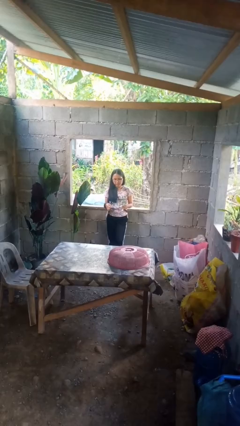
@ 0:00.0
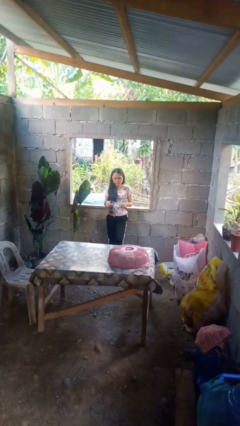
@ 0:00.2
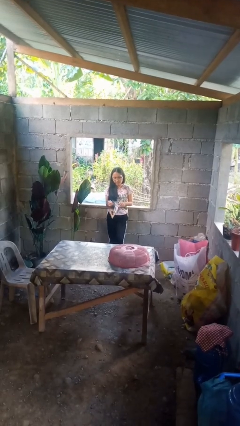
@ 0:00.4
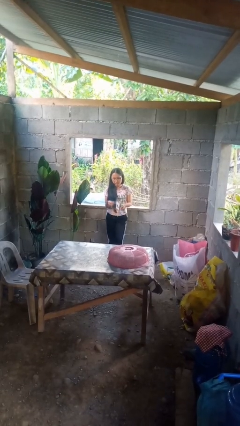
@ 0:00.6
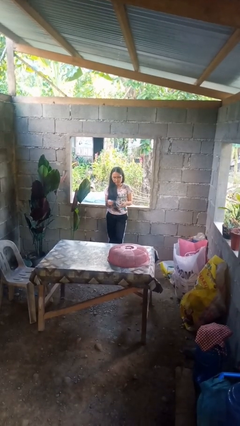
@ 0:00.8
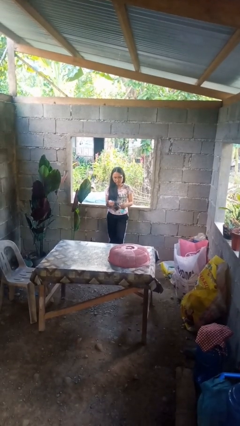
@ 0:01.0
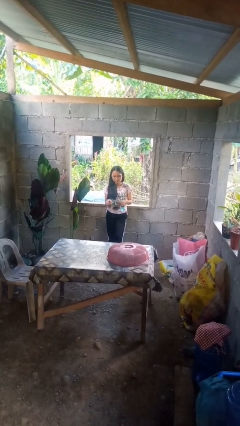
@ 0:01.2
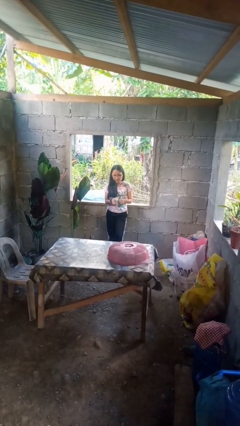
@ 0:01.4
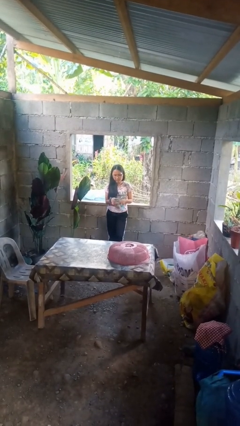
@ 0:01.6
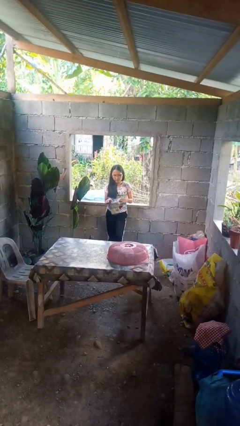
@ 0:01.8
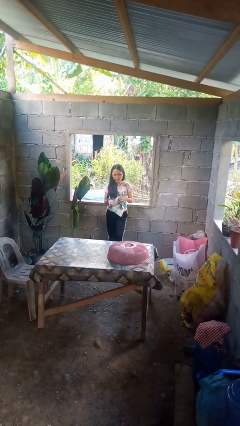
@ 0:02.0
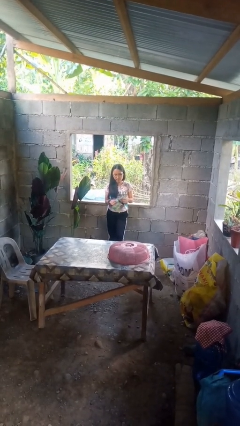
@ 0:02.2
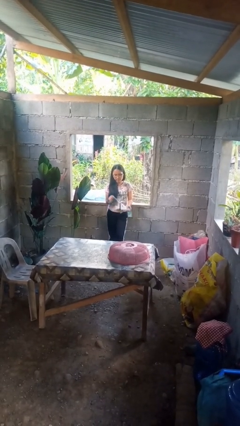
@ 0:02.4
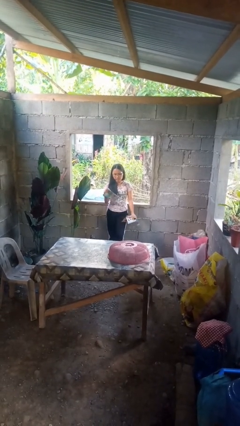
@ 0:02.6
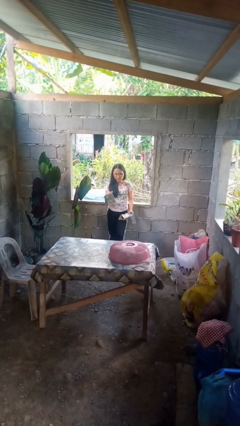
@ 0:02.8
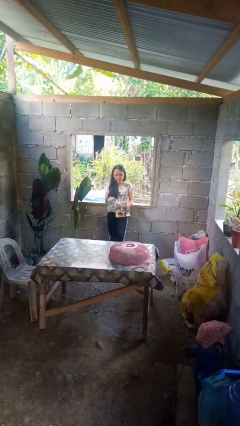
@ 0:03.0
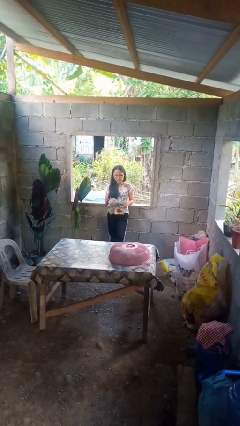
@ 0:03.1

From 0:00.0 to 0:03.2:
person tears paper

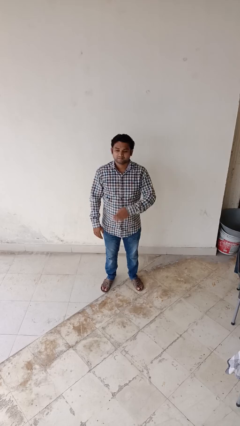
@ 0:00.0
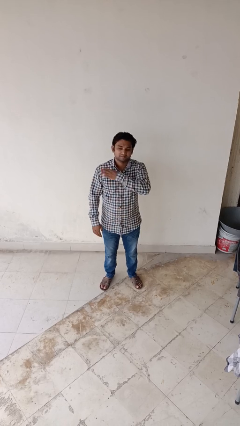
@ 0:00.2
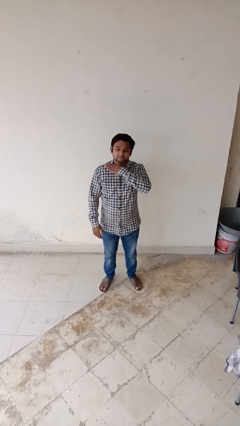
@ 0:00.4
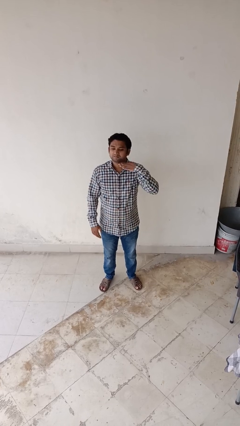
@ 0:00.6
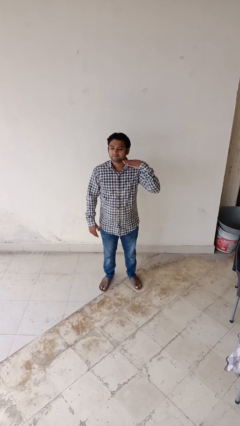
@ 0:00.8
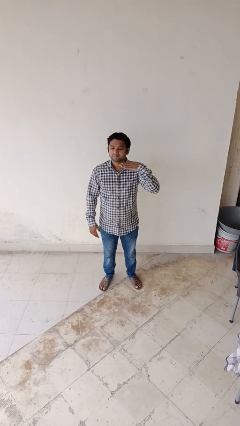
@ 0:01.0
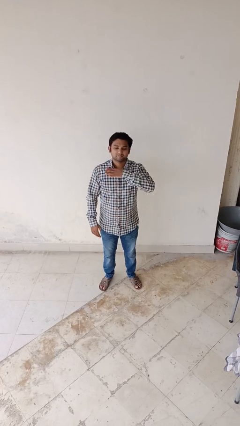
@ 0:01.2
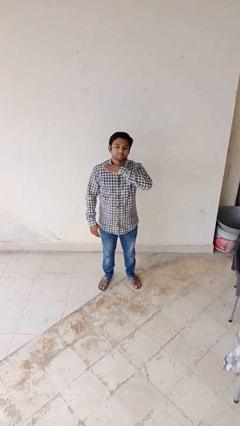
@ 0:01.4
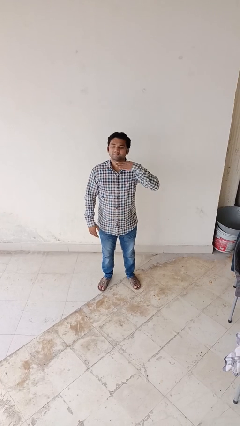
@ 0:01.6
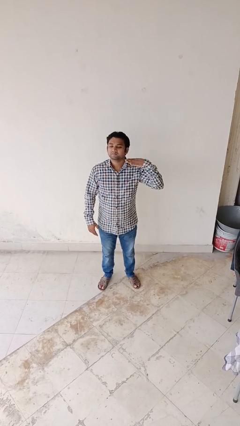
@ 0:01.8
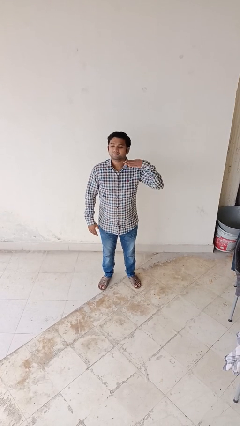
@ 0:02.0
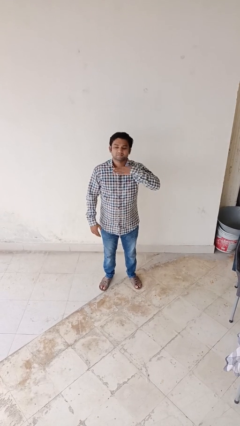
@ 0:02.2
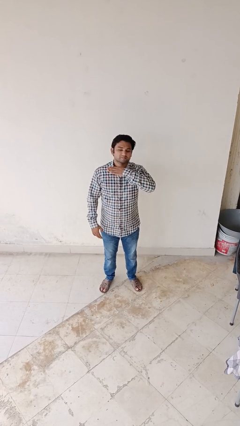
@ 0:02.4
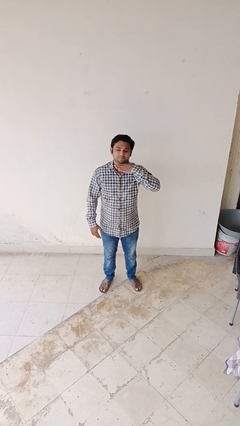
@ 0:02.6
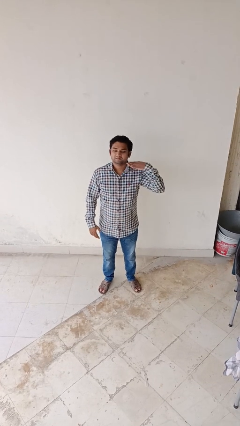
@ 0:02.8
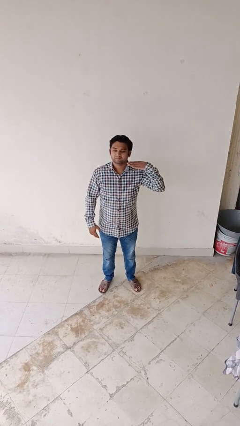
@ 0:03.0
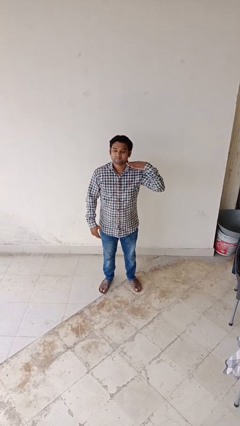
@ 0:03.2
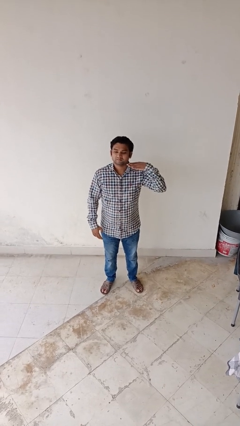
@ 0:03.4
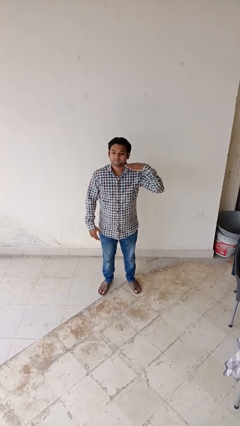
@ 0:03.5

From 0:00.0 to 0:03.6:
person gestures cut

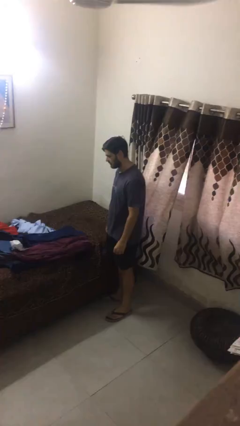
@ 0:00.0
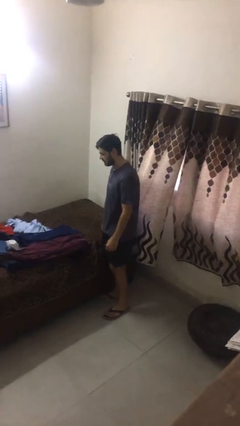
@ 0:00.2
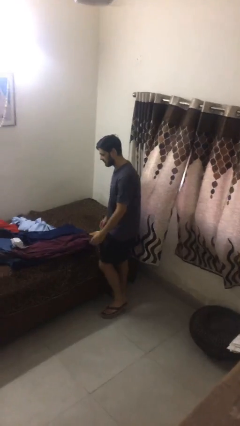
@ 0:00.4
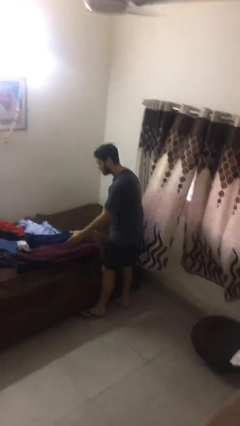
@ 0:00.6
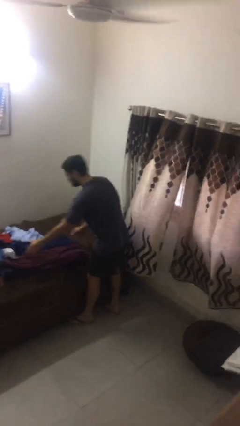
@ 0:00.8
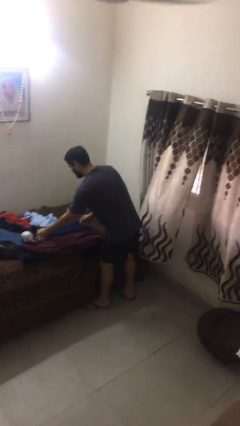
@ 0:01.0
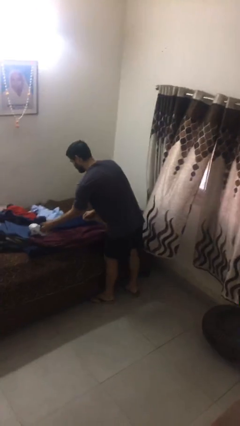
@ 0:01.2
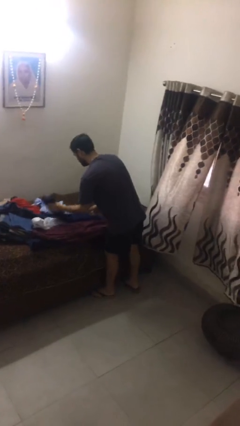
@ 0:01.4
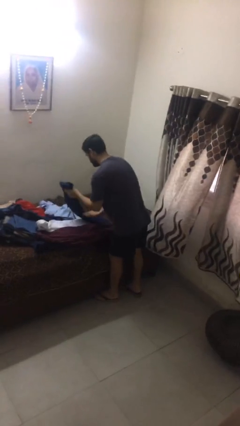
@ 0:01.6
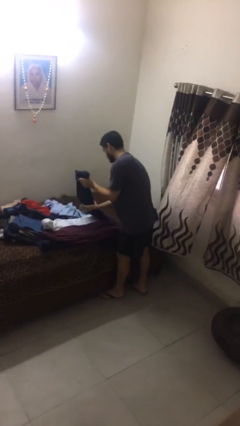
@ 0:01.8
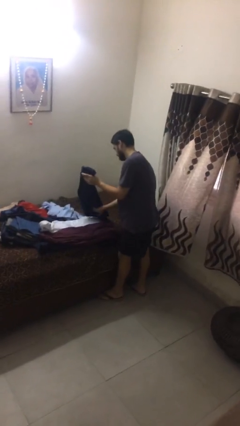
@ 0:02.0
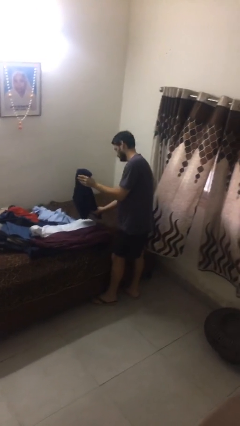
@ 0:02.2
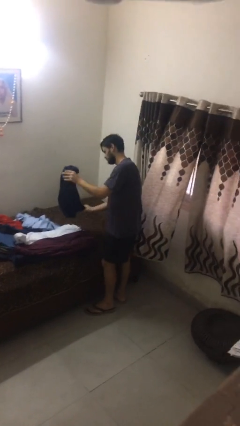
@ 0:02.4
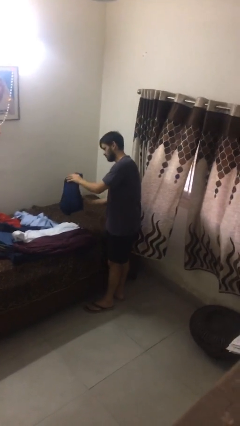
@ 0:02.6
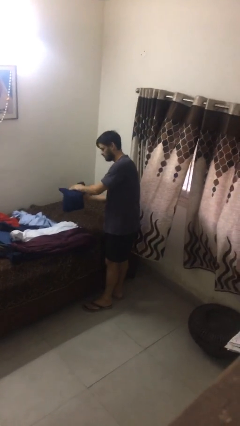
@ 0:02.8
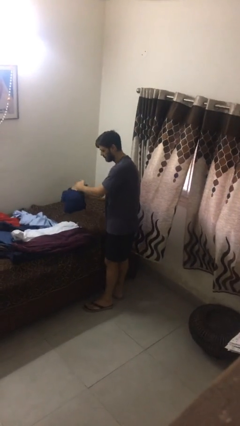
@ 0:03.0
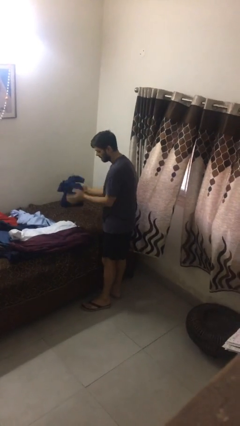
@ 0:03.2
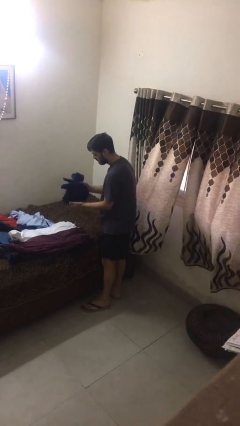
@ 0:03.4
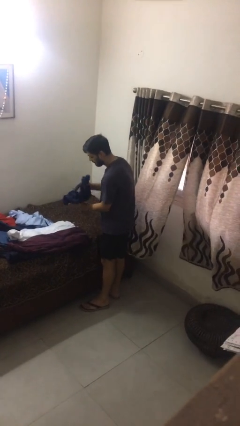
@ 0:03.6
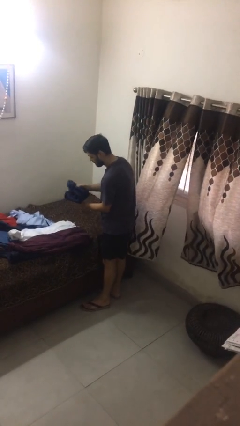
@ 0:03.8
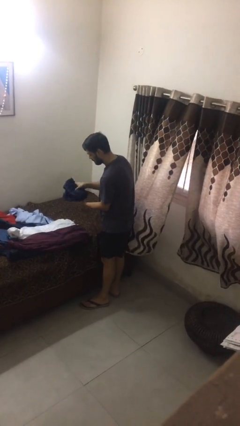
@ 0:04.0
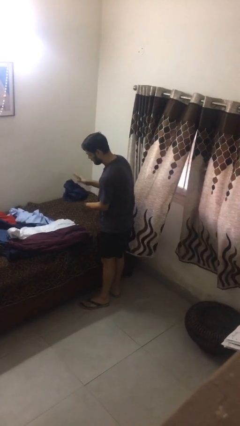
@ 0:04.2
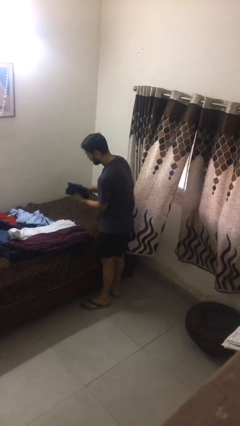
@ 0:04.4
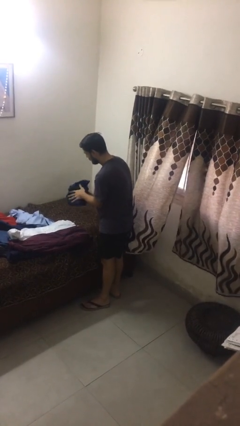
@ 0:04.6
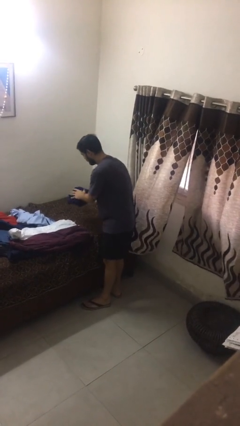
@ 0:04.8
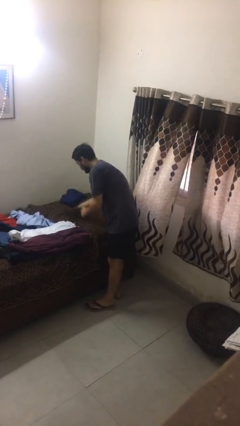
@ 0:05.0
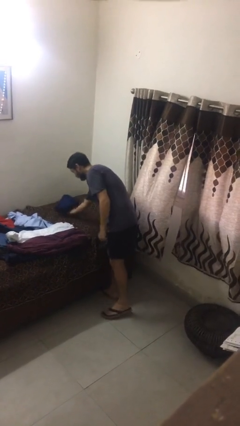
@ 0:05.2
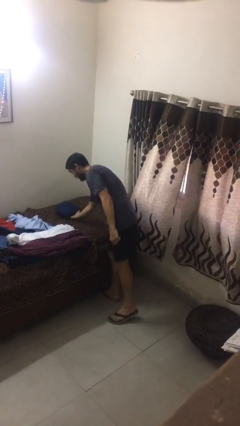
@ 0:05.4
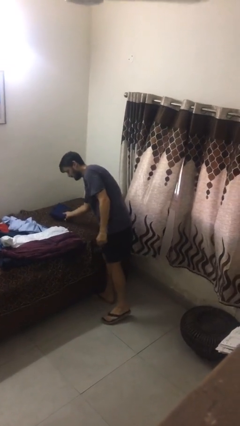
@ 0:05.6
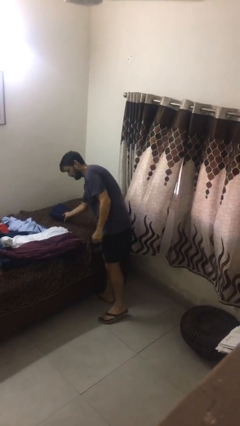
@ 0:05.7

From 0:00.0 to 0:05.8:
person folds shirt

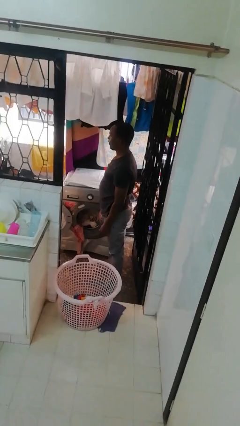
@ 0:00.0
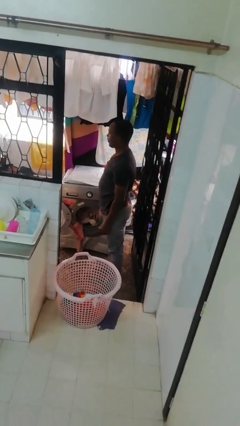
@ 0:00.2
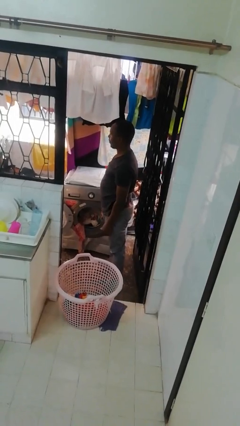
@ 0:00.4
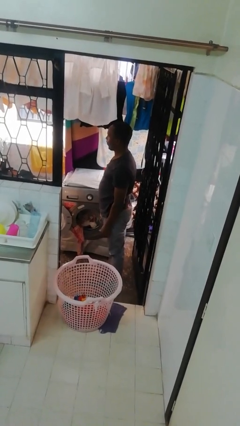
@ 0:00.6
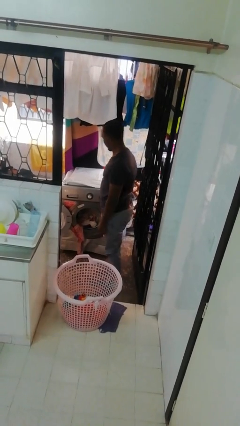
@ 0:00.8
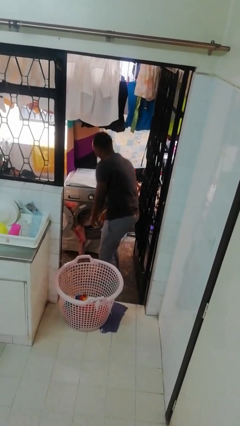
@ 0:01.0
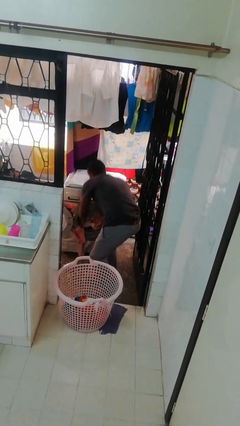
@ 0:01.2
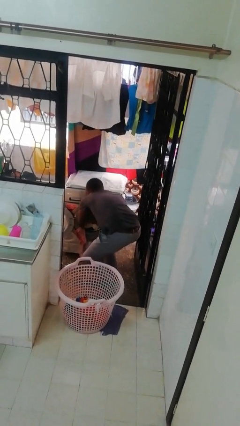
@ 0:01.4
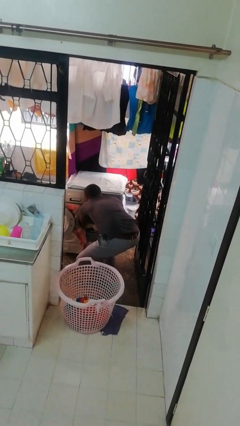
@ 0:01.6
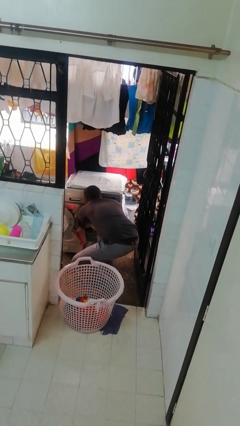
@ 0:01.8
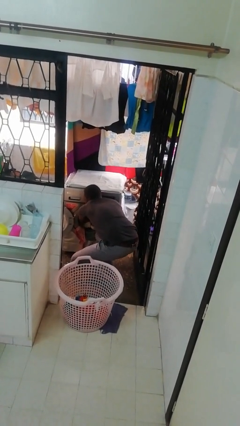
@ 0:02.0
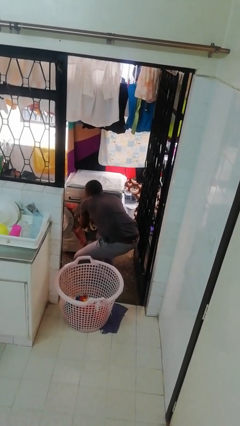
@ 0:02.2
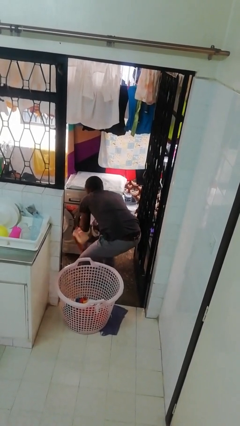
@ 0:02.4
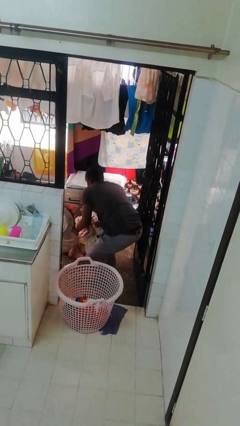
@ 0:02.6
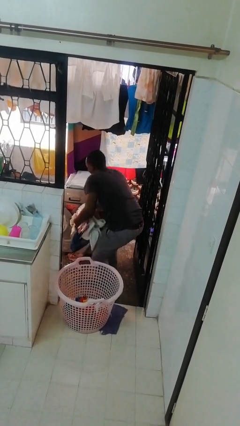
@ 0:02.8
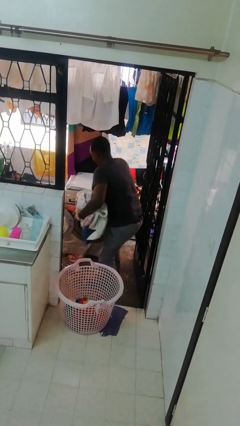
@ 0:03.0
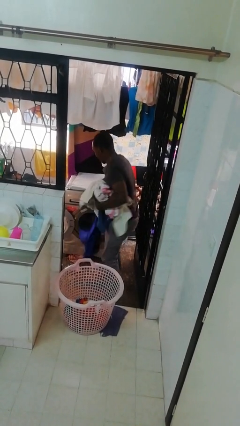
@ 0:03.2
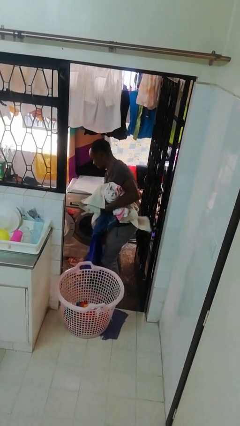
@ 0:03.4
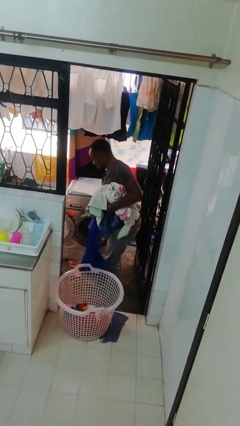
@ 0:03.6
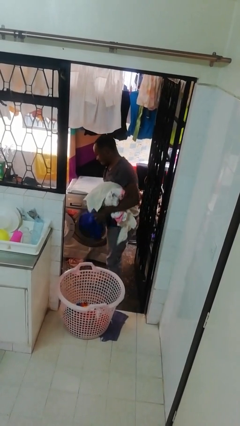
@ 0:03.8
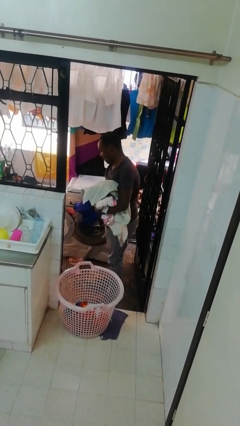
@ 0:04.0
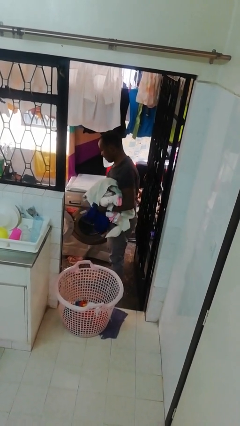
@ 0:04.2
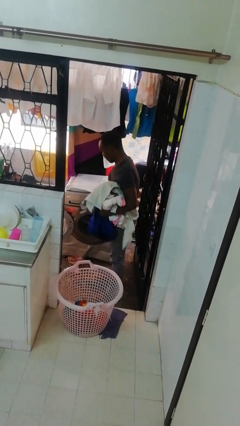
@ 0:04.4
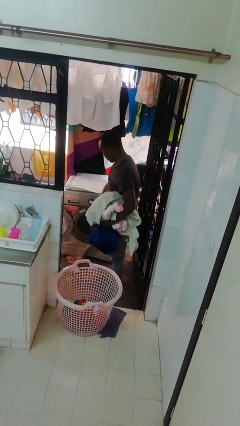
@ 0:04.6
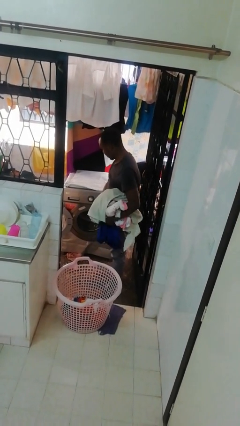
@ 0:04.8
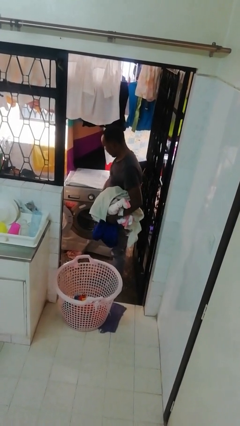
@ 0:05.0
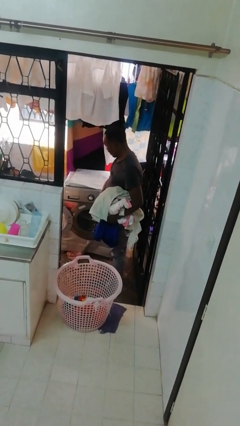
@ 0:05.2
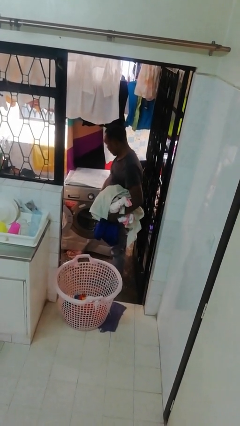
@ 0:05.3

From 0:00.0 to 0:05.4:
person unloads clotheswasher
